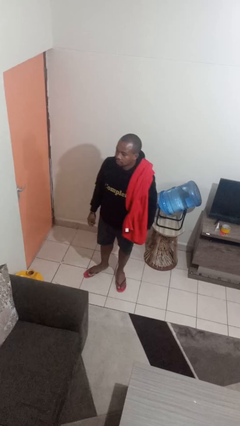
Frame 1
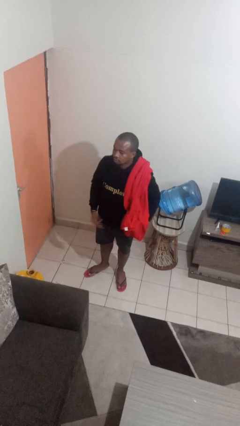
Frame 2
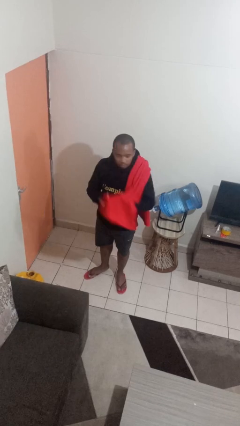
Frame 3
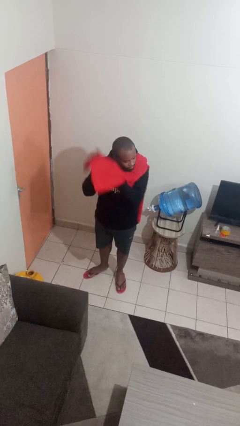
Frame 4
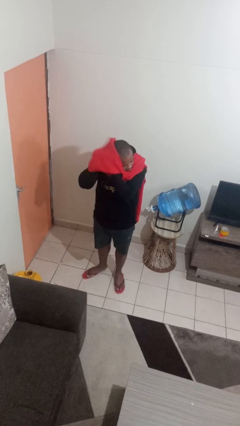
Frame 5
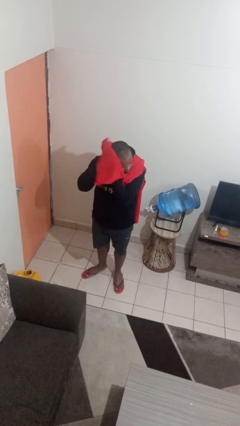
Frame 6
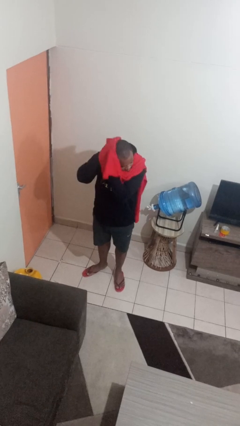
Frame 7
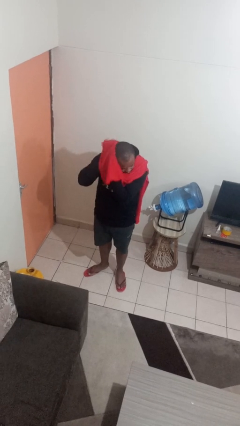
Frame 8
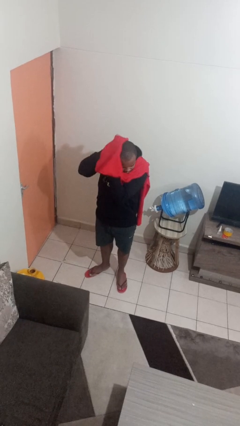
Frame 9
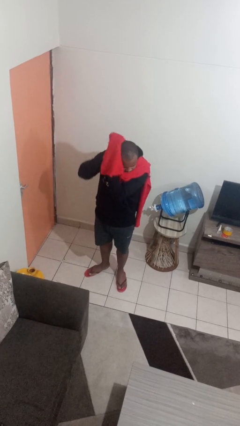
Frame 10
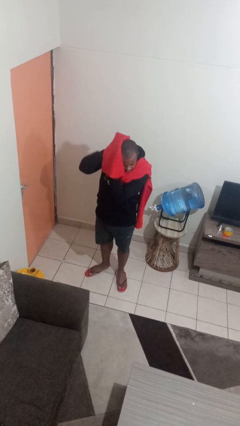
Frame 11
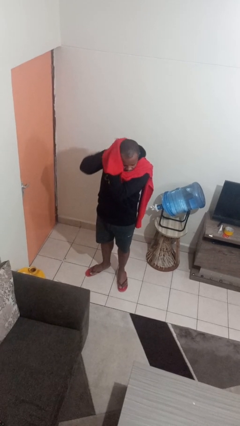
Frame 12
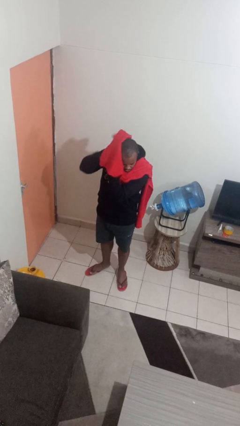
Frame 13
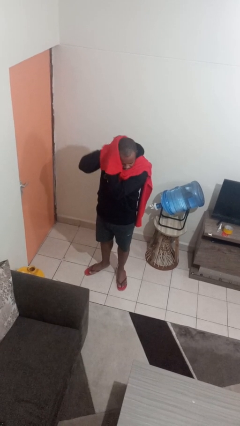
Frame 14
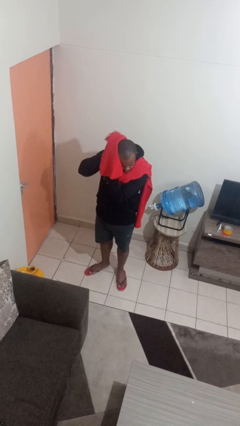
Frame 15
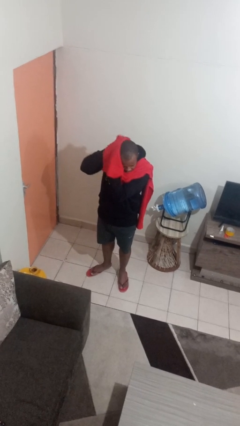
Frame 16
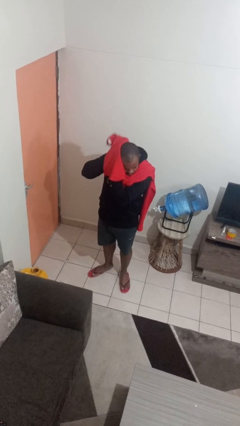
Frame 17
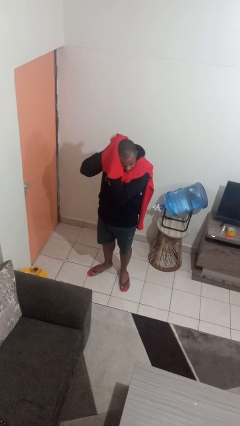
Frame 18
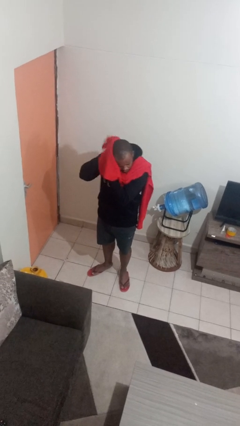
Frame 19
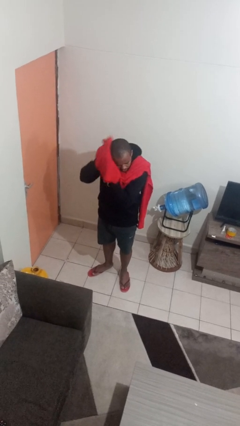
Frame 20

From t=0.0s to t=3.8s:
person dries hair with towel

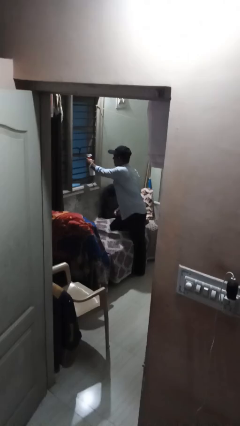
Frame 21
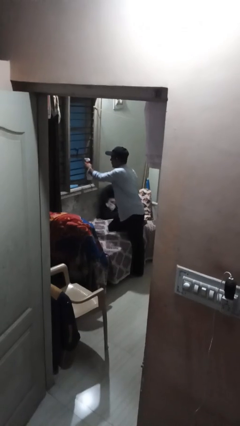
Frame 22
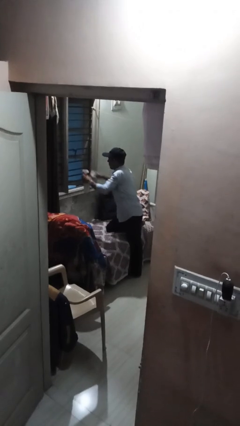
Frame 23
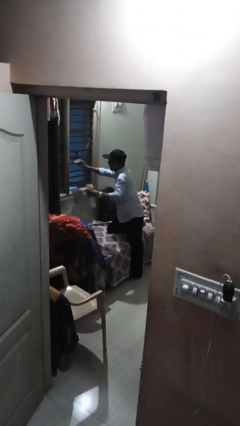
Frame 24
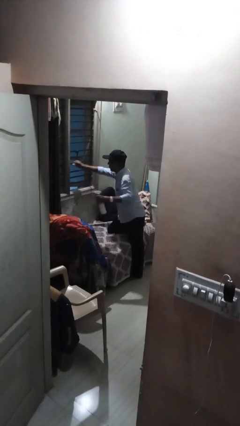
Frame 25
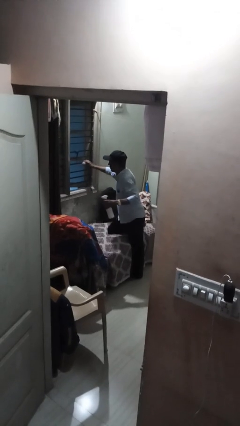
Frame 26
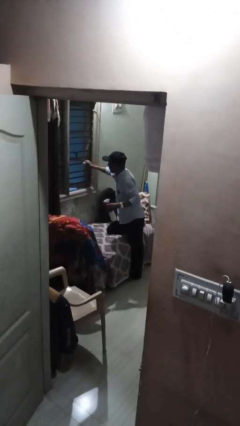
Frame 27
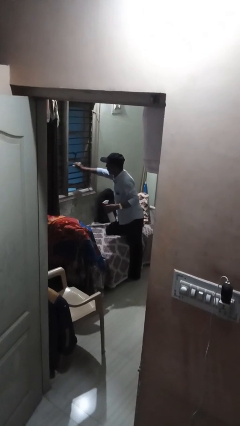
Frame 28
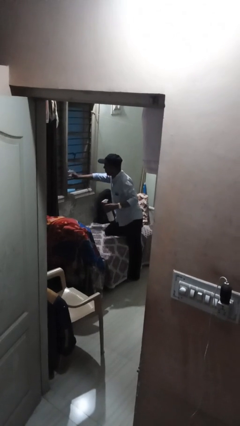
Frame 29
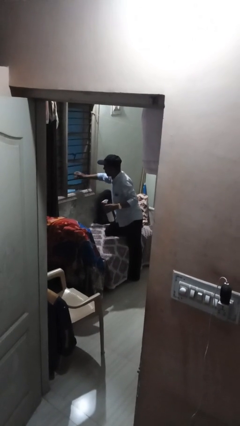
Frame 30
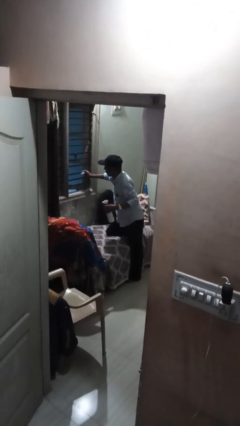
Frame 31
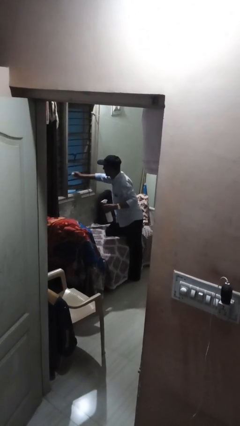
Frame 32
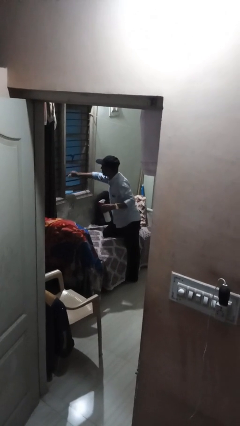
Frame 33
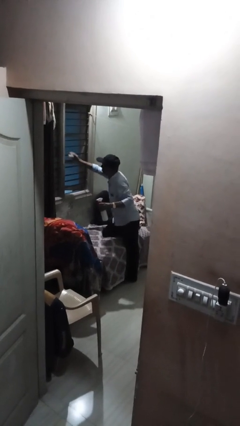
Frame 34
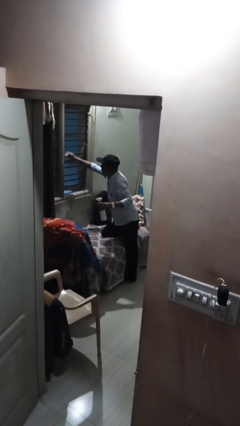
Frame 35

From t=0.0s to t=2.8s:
person washes window

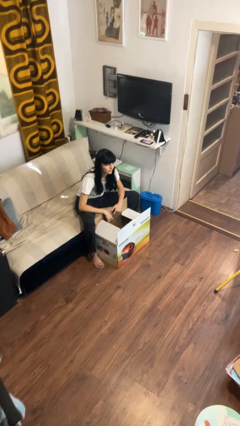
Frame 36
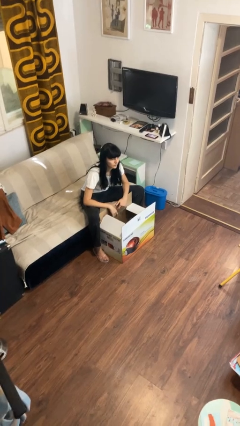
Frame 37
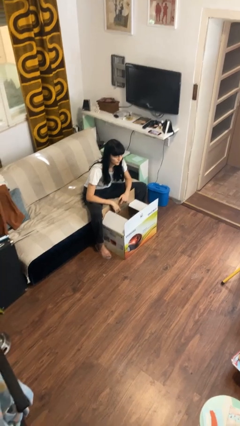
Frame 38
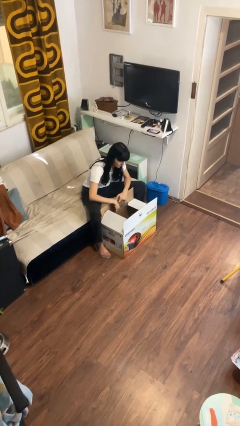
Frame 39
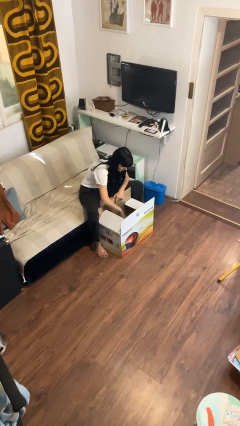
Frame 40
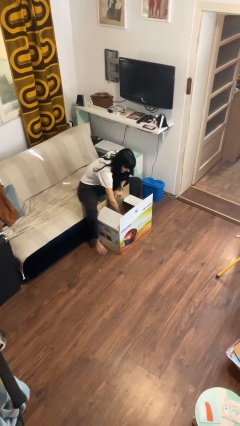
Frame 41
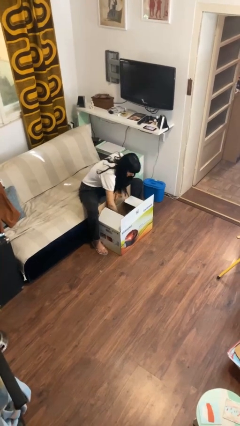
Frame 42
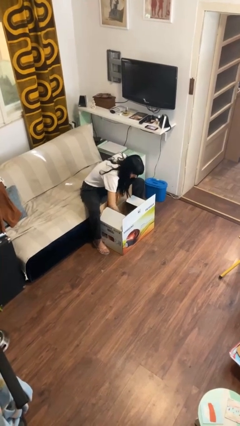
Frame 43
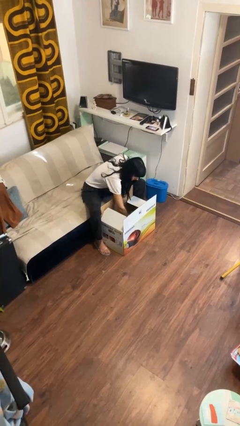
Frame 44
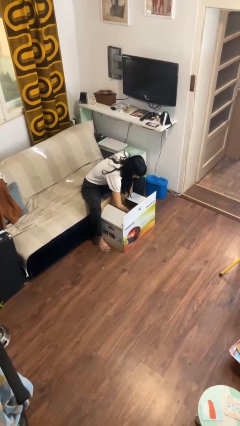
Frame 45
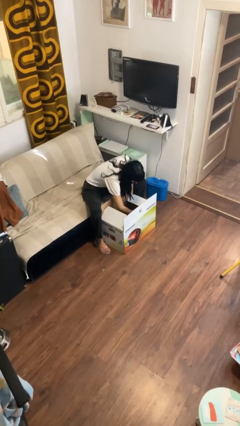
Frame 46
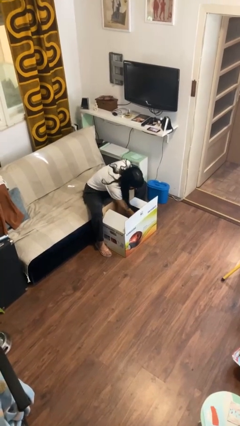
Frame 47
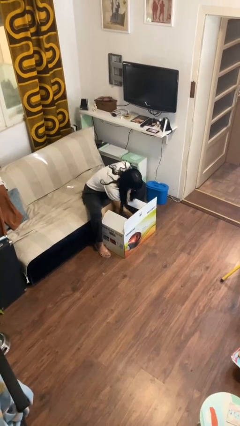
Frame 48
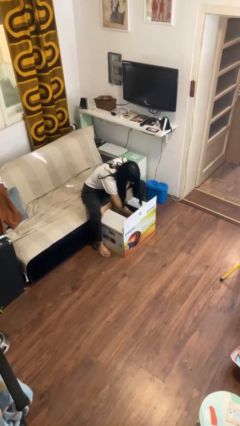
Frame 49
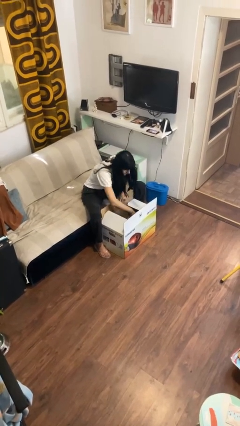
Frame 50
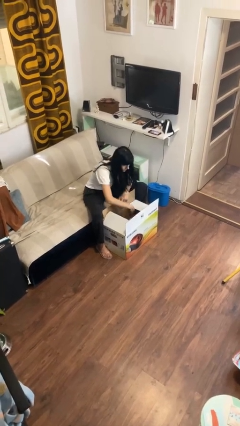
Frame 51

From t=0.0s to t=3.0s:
person searches in box

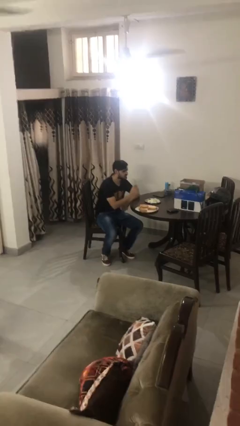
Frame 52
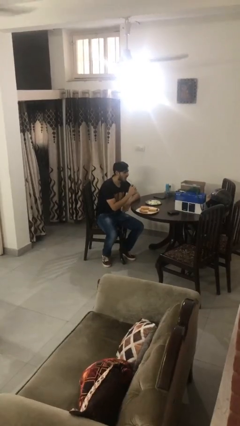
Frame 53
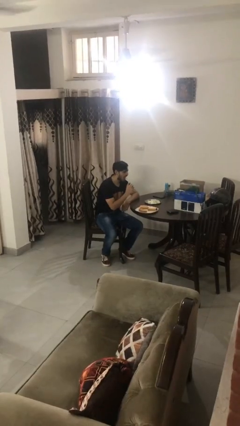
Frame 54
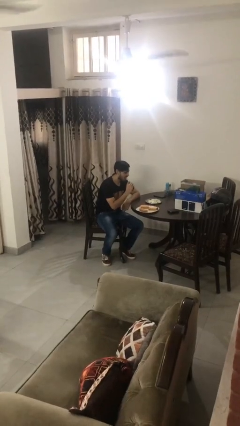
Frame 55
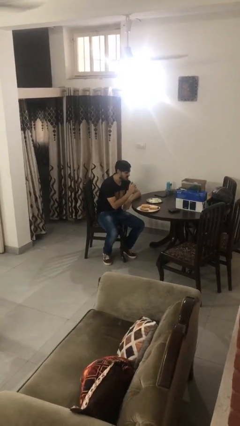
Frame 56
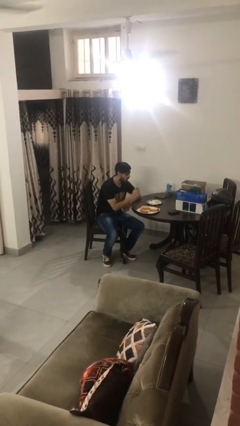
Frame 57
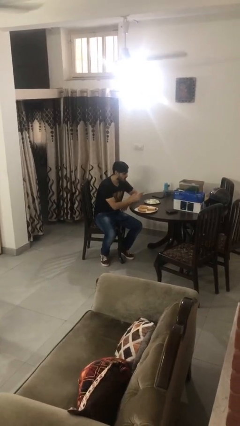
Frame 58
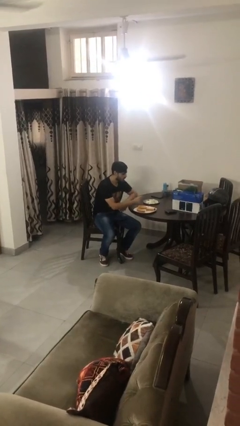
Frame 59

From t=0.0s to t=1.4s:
person eats with utensil

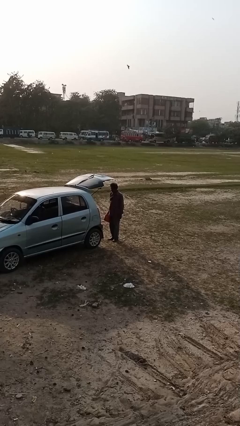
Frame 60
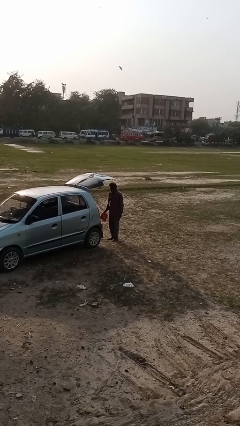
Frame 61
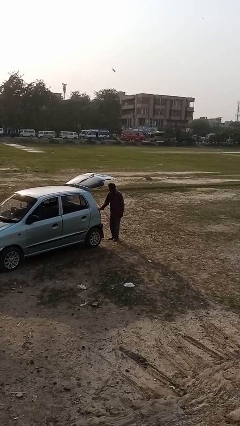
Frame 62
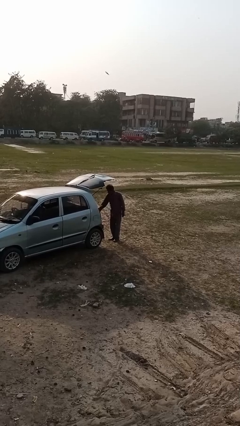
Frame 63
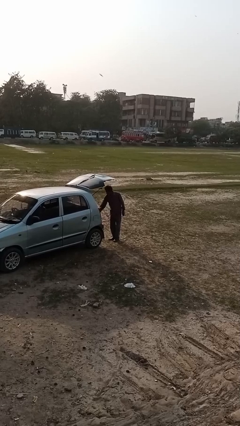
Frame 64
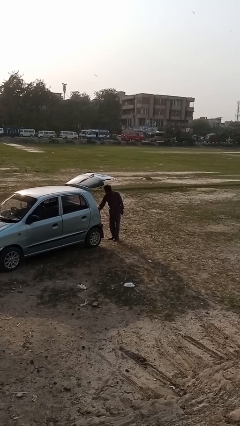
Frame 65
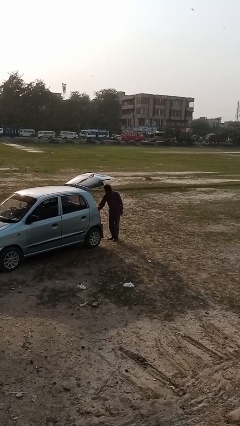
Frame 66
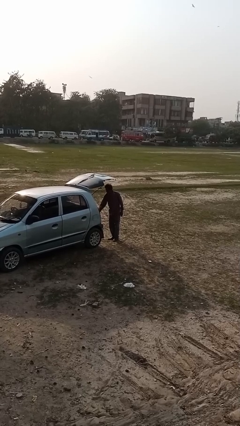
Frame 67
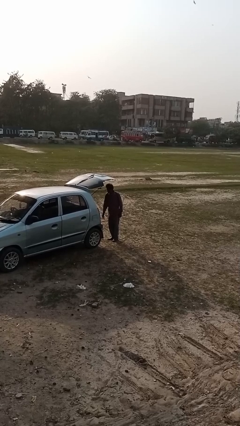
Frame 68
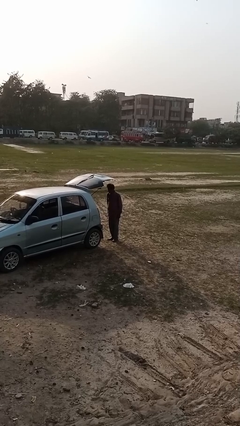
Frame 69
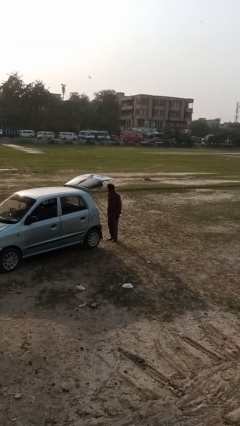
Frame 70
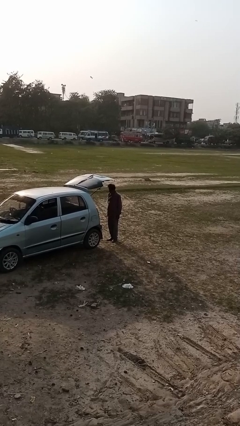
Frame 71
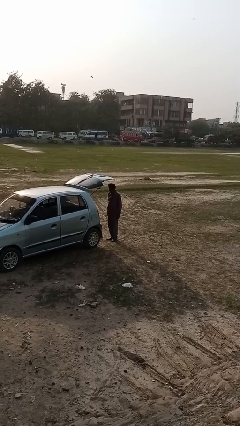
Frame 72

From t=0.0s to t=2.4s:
person loads car

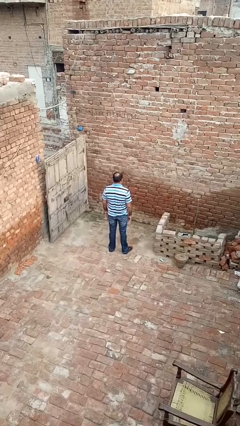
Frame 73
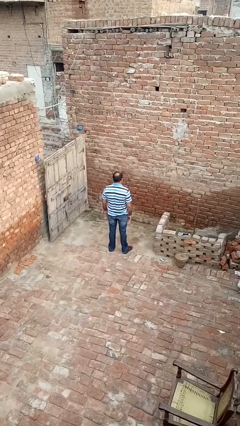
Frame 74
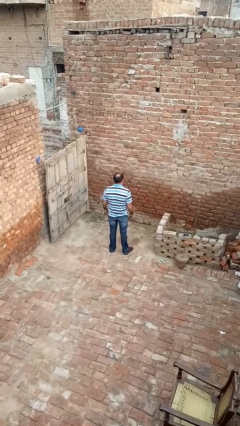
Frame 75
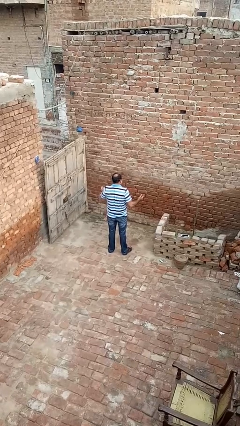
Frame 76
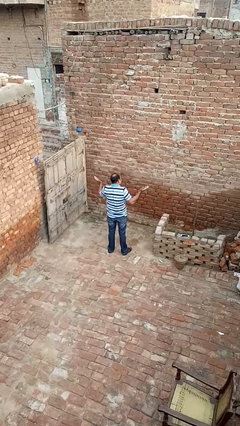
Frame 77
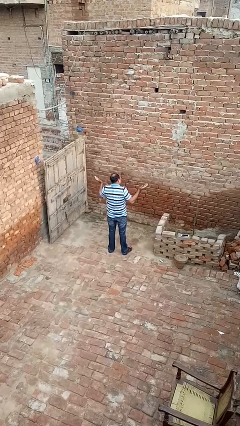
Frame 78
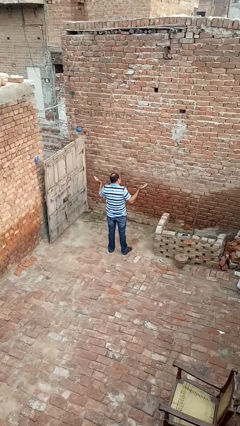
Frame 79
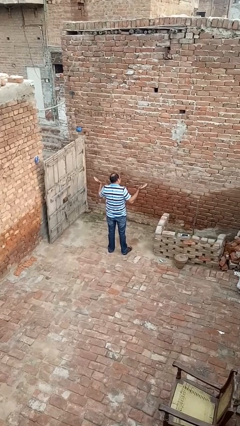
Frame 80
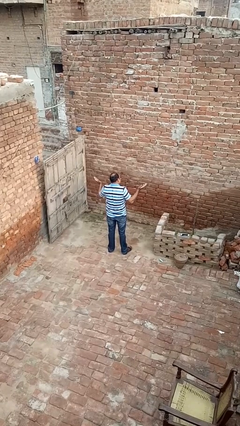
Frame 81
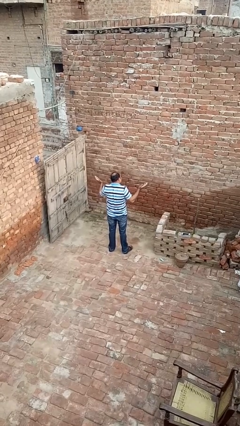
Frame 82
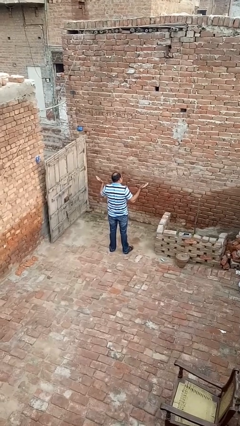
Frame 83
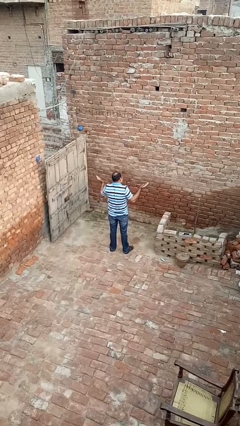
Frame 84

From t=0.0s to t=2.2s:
person shrugs

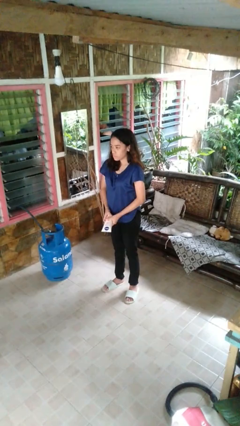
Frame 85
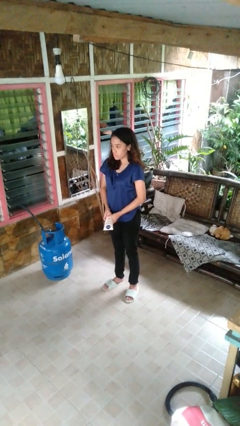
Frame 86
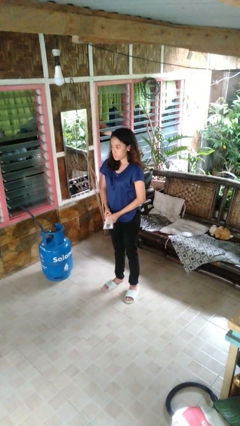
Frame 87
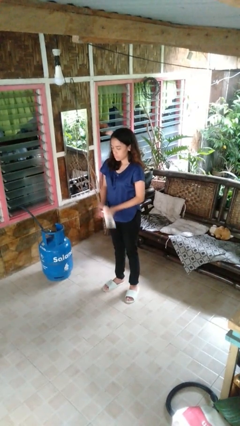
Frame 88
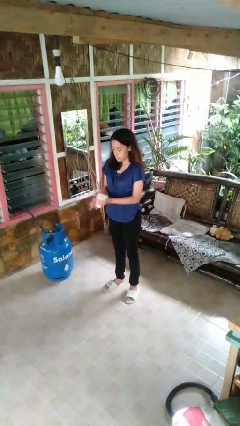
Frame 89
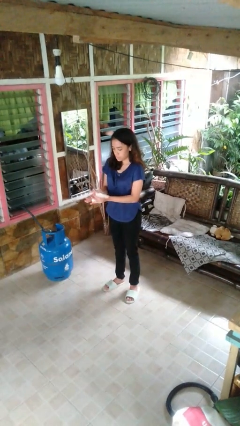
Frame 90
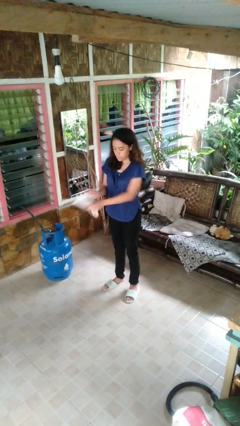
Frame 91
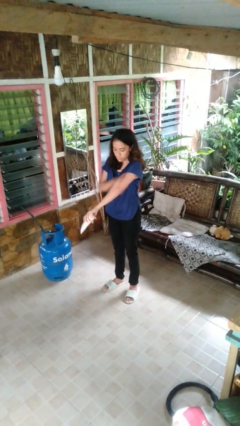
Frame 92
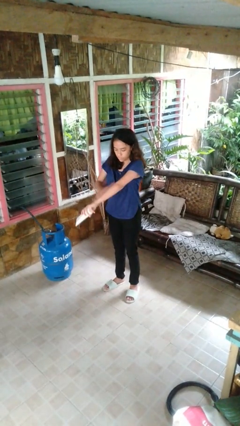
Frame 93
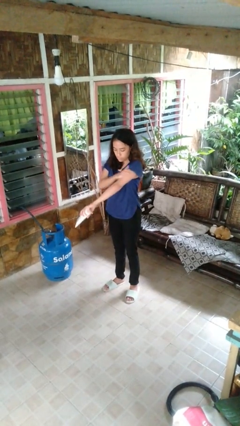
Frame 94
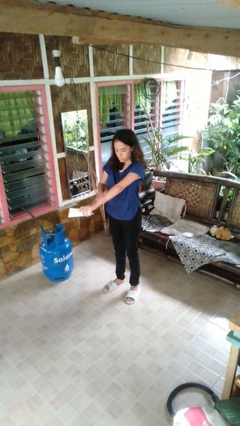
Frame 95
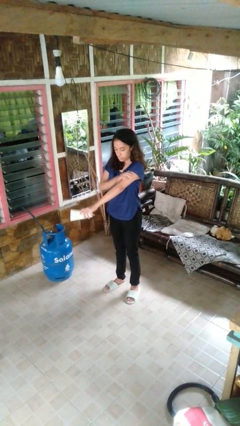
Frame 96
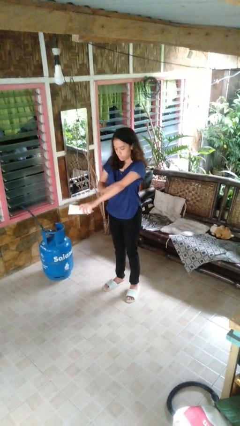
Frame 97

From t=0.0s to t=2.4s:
person applies sunscreen
